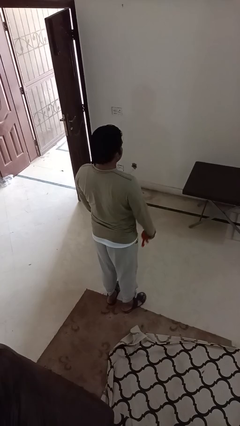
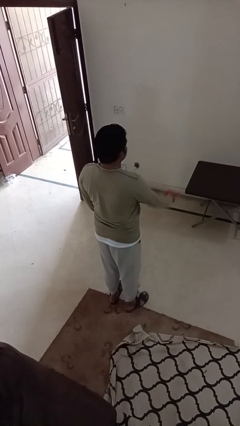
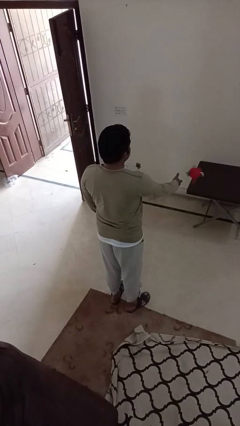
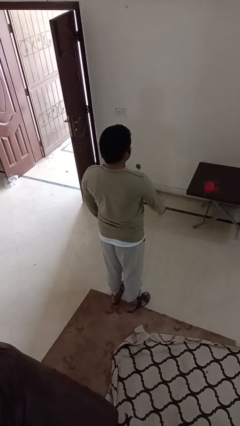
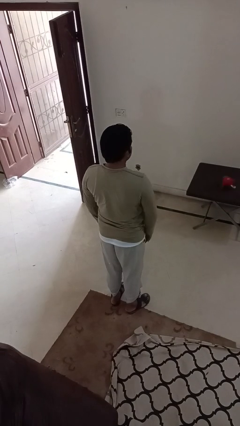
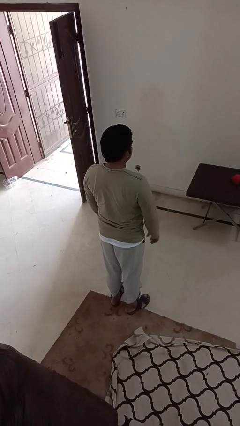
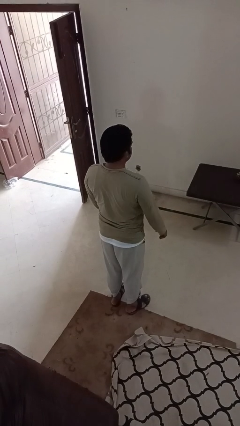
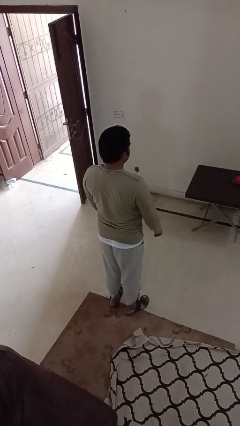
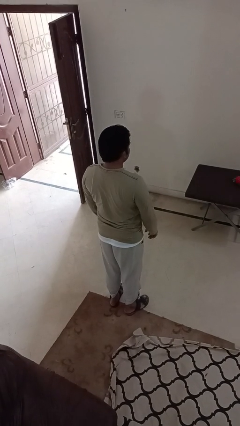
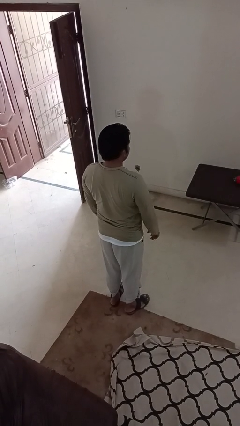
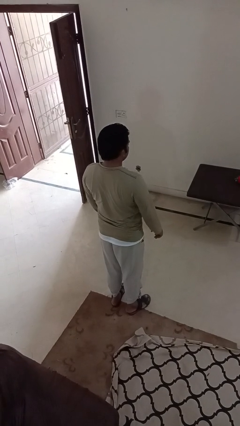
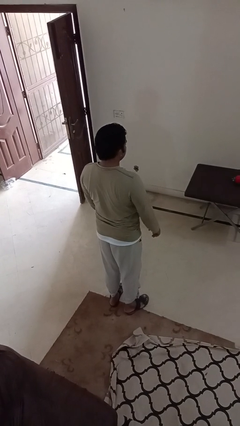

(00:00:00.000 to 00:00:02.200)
person throws object on table

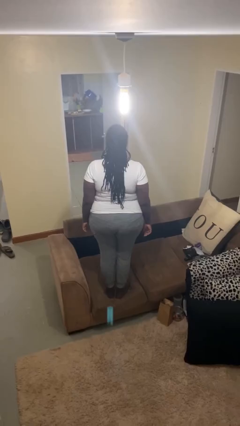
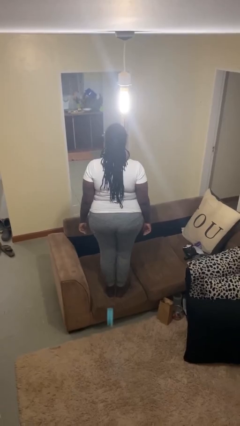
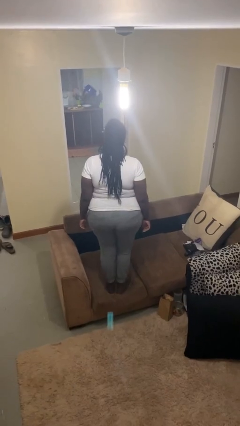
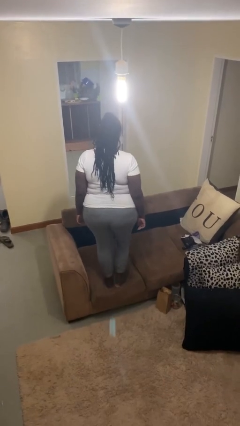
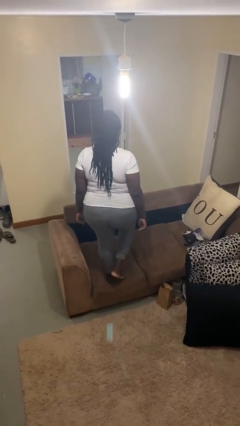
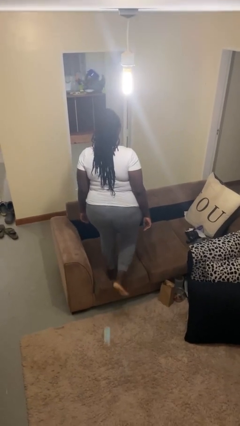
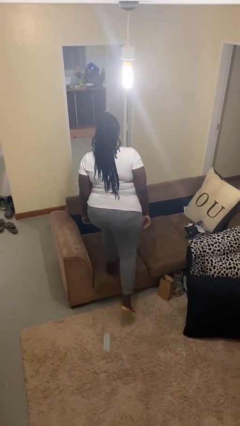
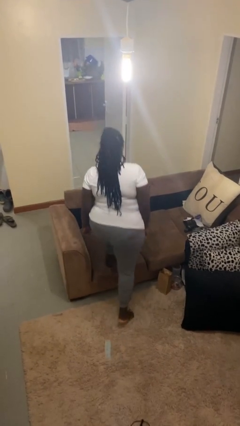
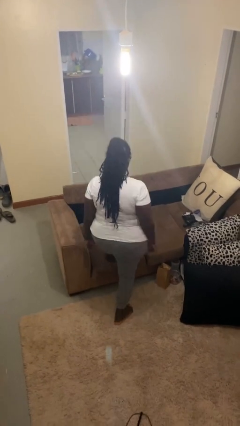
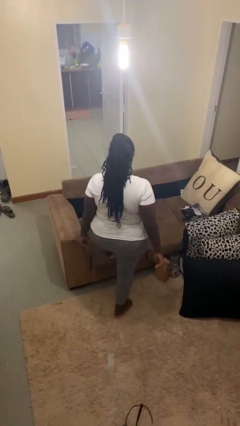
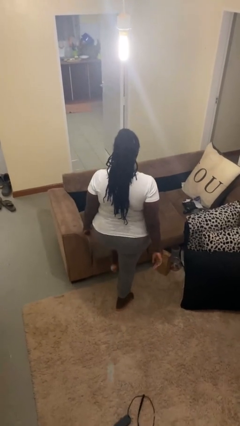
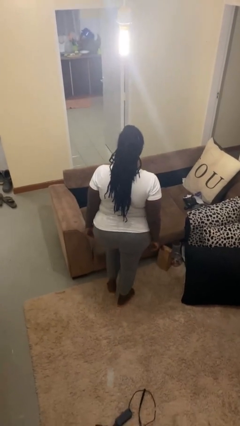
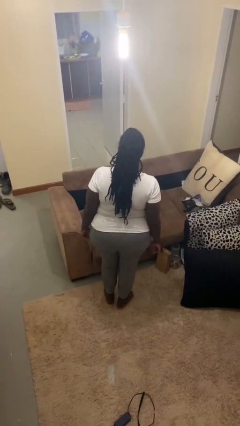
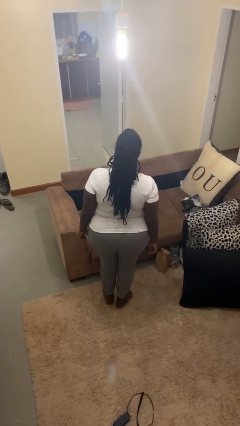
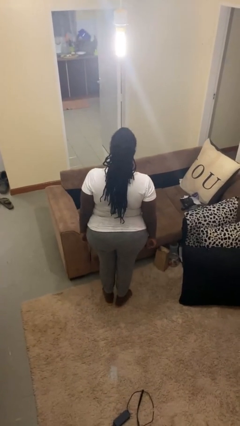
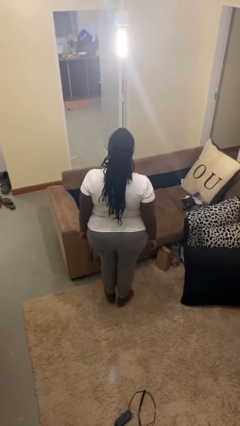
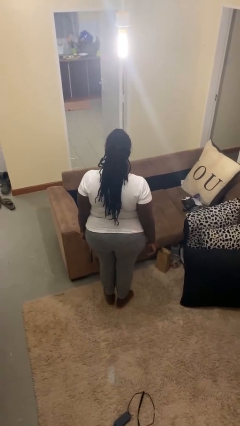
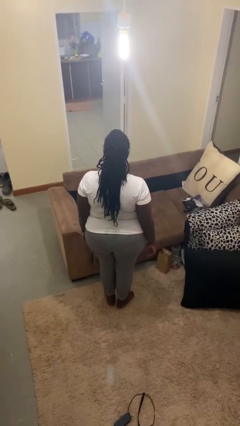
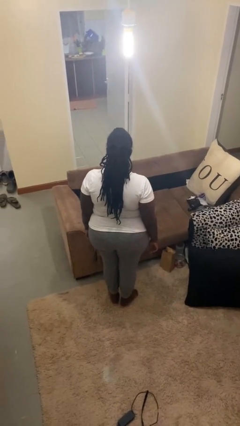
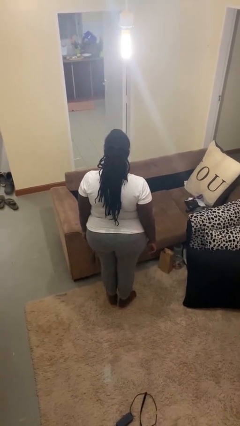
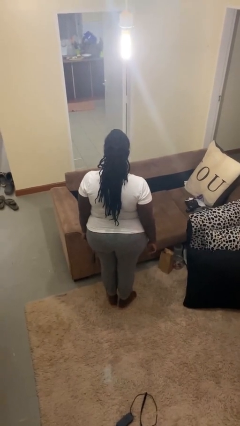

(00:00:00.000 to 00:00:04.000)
person climbs off couch

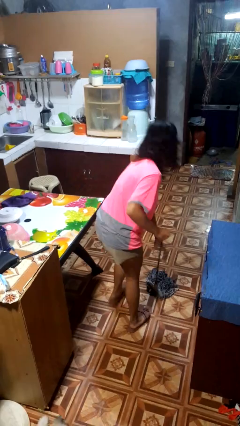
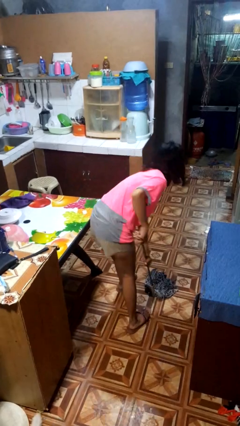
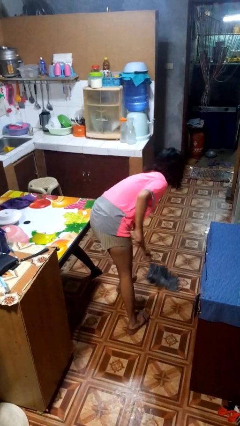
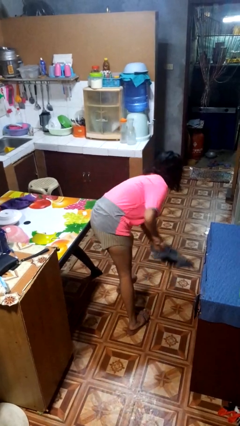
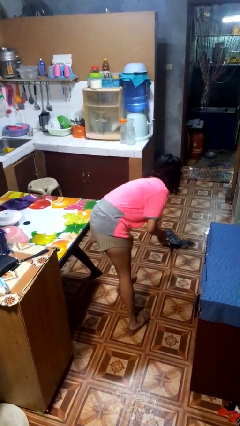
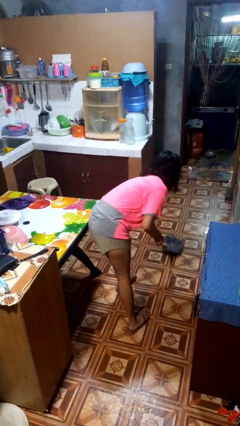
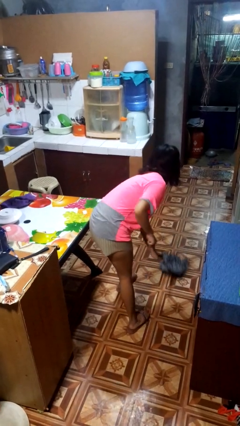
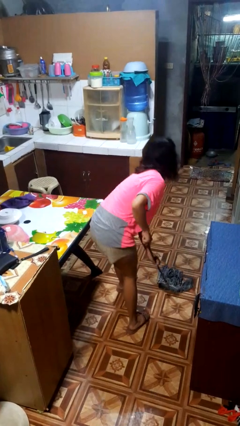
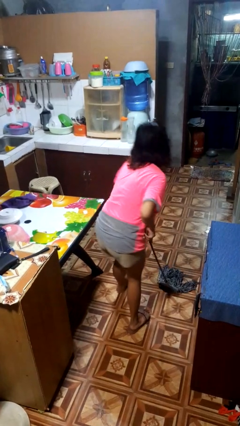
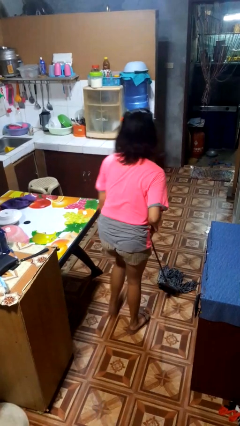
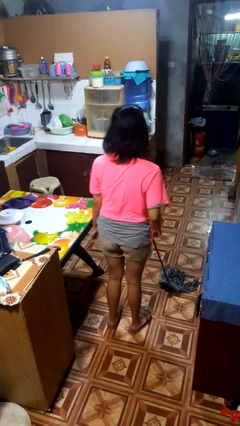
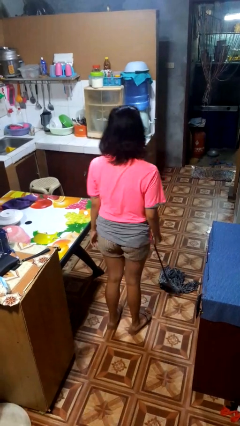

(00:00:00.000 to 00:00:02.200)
person mops

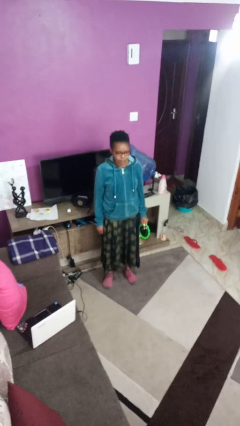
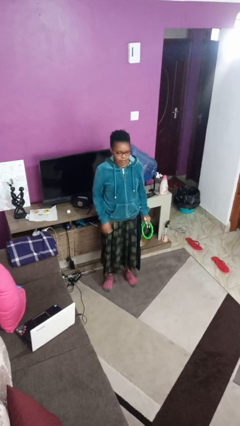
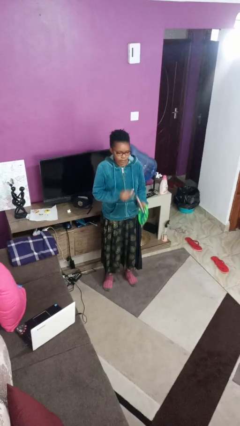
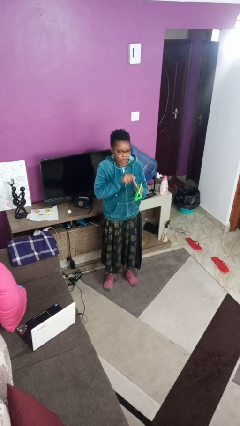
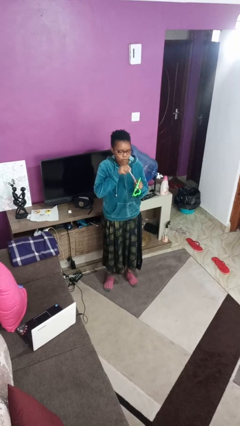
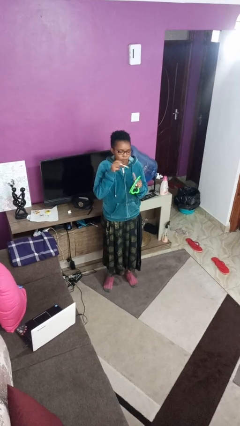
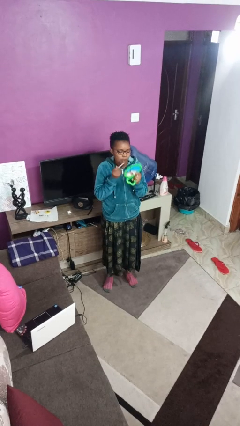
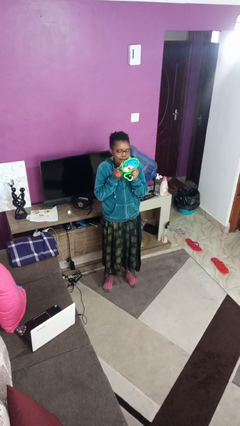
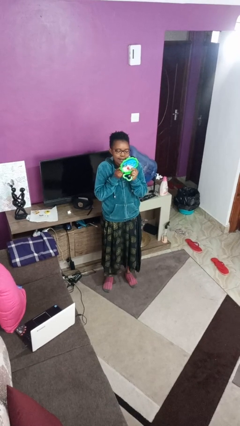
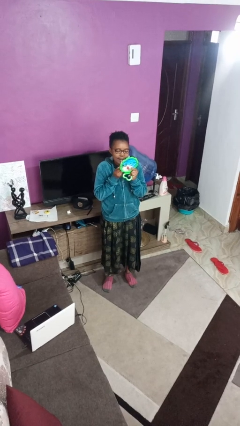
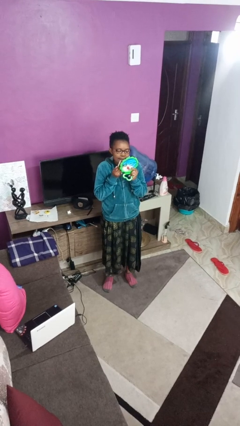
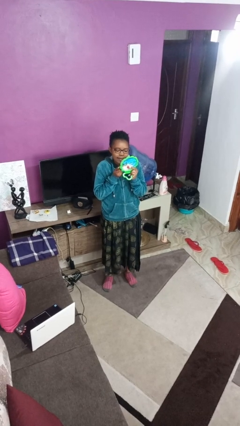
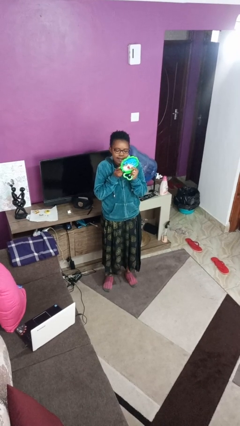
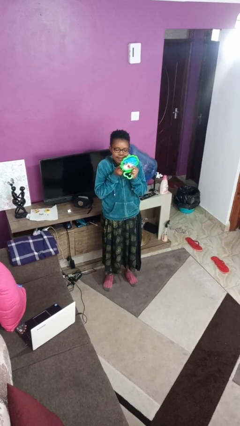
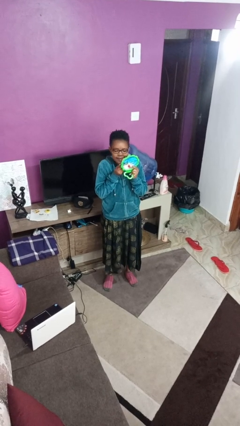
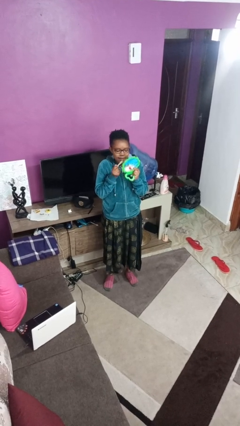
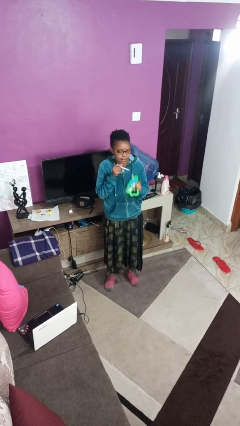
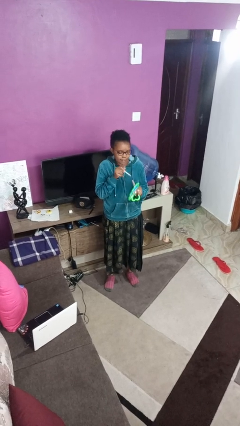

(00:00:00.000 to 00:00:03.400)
person applies lip makeup

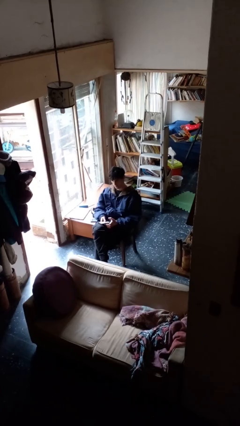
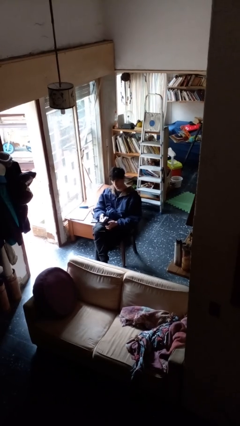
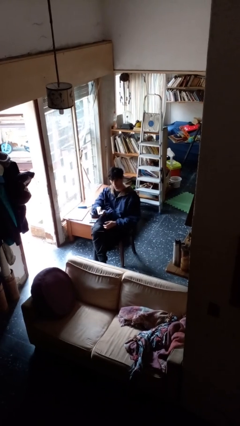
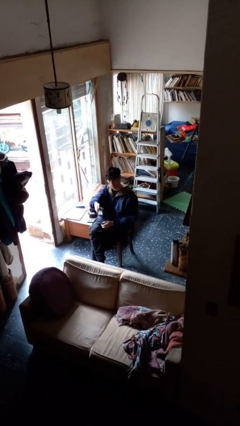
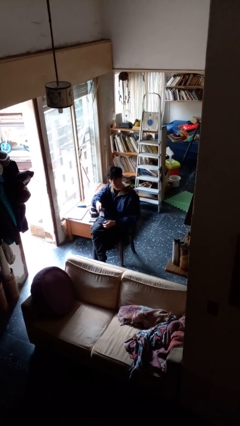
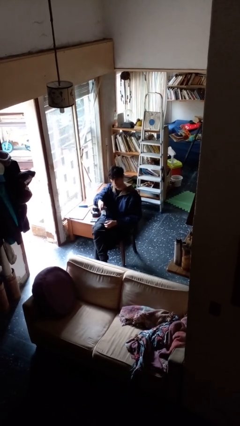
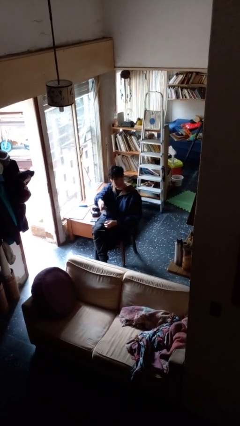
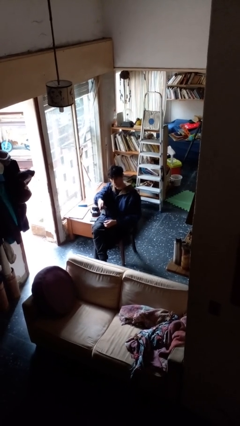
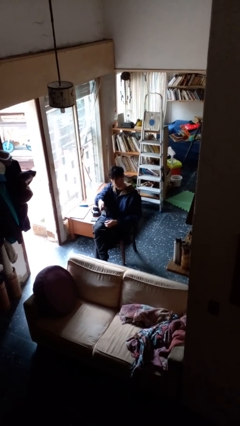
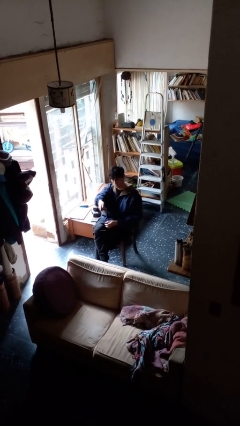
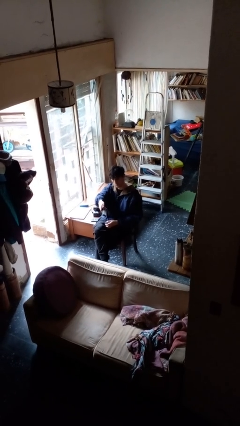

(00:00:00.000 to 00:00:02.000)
person uses television remote

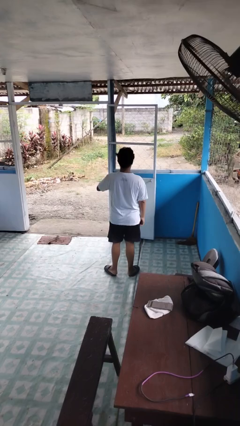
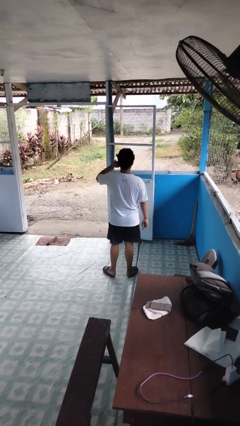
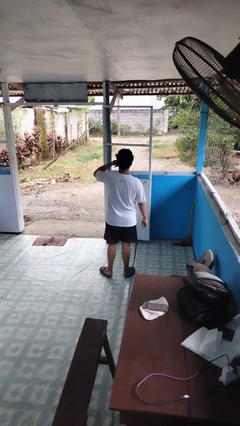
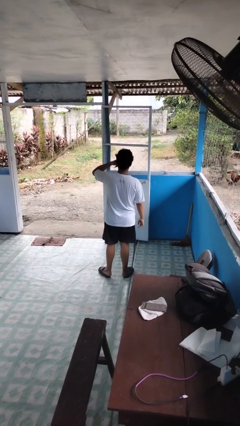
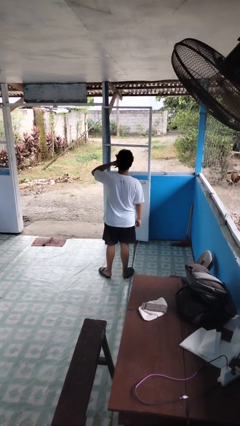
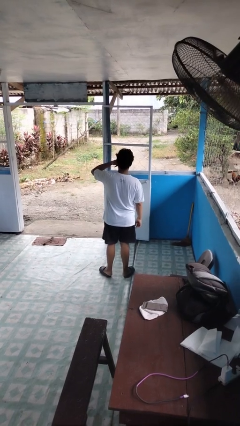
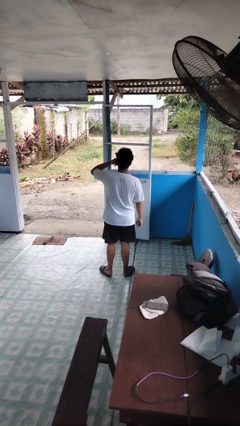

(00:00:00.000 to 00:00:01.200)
person gestures call me

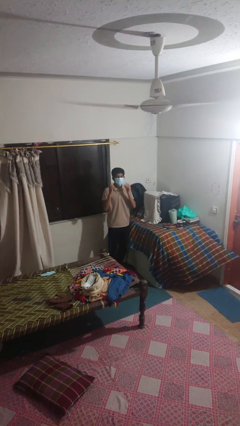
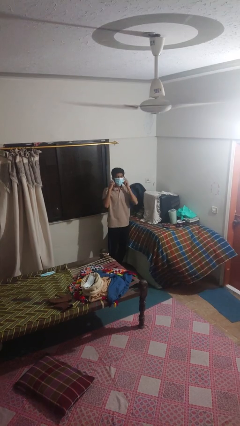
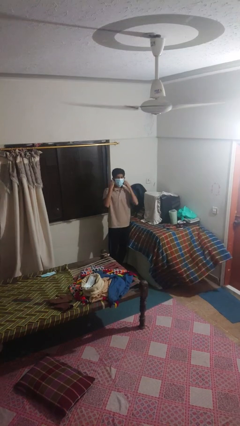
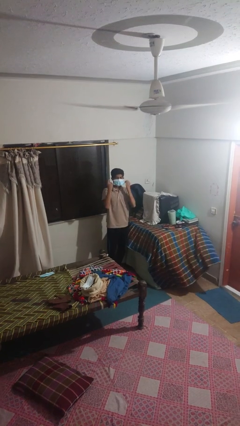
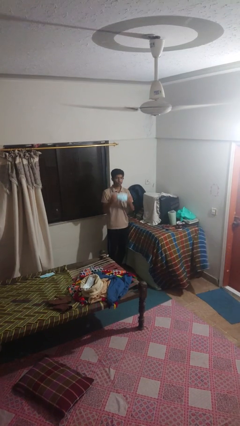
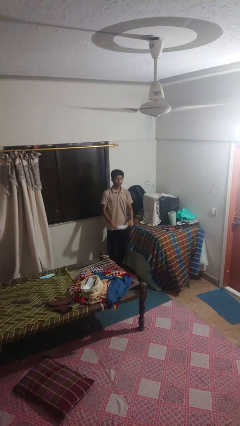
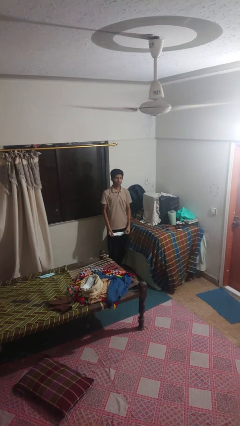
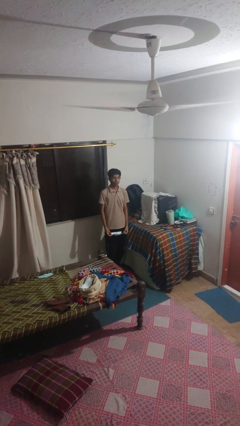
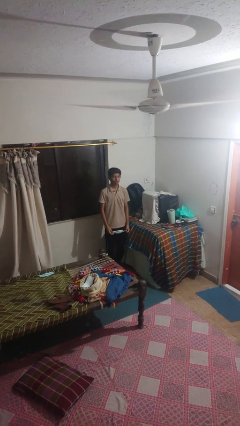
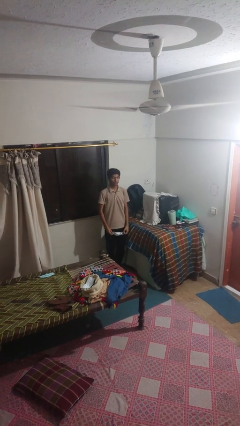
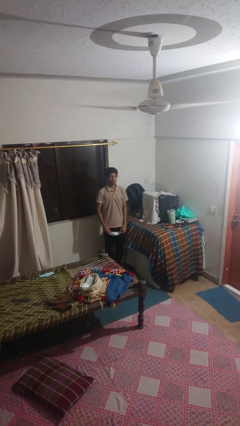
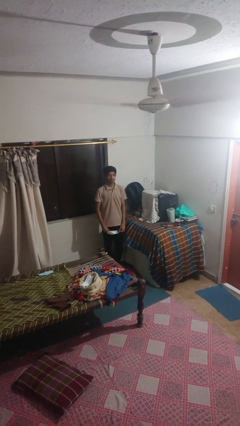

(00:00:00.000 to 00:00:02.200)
person takes off facemask
